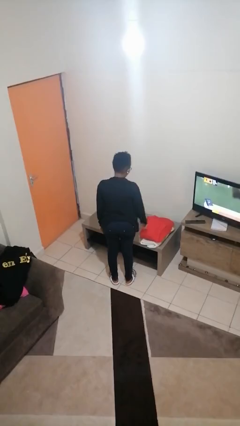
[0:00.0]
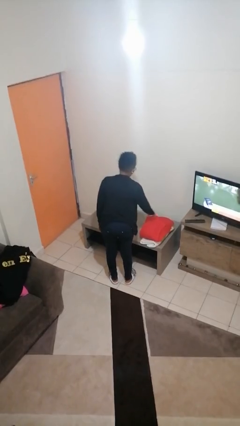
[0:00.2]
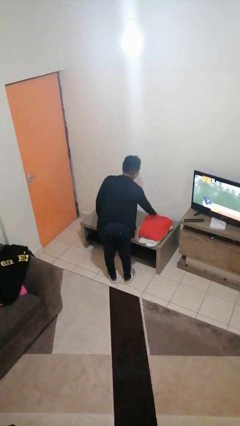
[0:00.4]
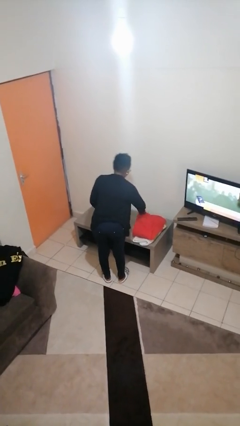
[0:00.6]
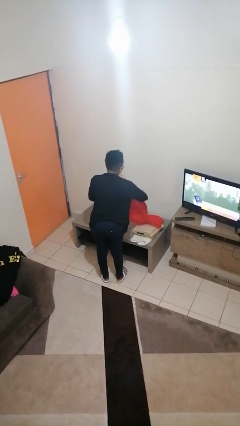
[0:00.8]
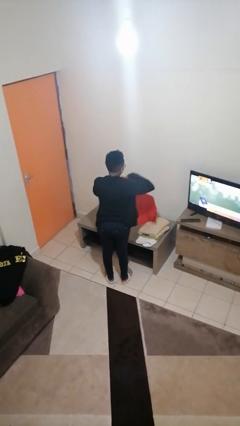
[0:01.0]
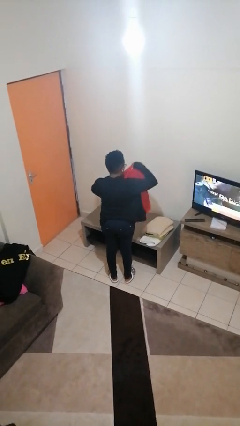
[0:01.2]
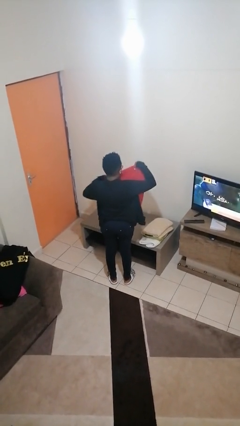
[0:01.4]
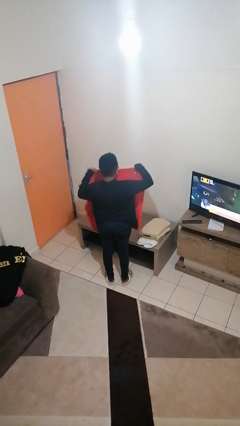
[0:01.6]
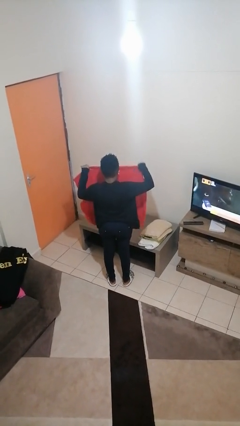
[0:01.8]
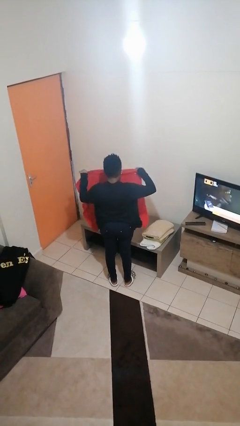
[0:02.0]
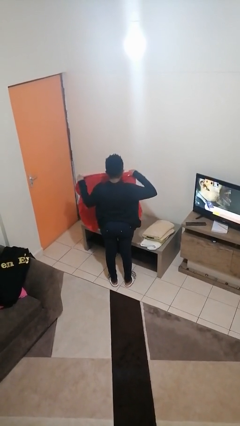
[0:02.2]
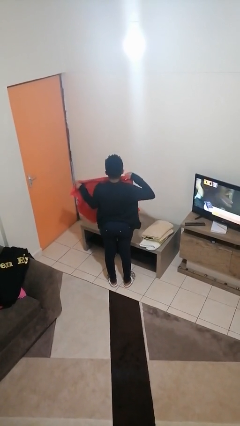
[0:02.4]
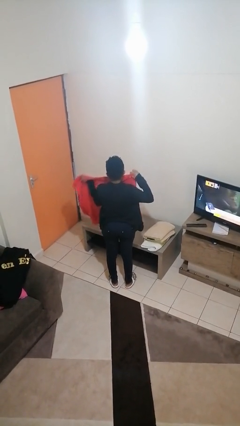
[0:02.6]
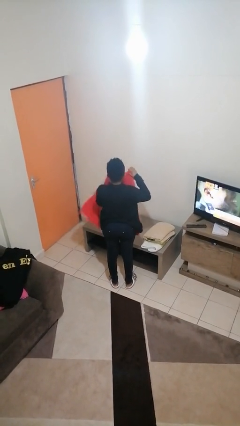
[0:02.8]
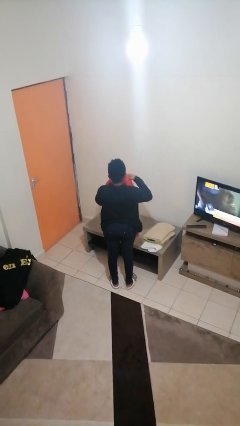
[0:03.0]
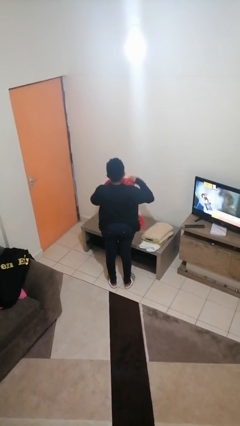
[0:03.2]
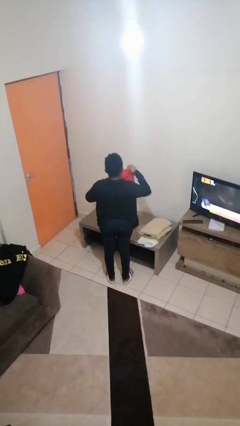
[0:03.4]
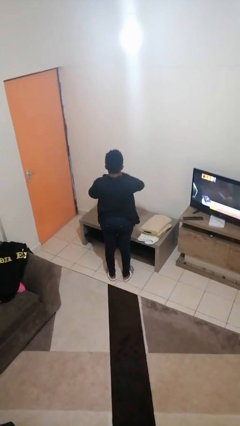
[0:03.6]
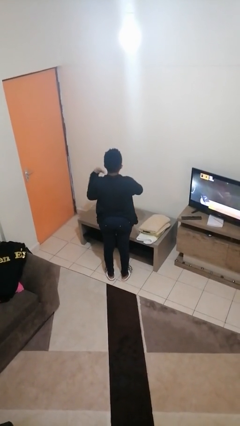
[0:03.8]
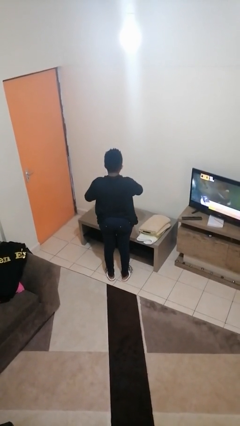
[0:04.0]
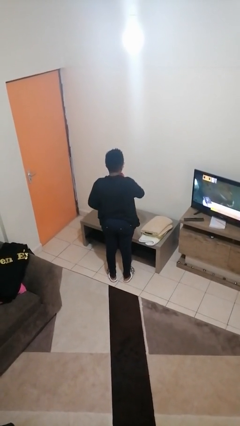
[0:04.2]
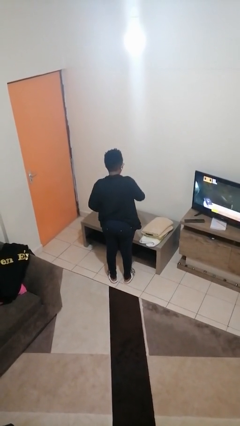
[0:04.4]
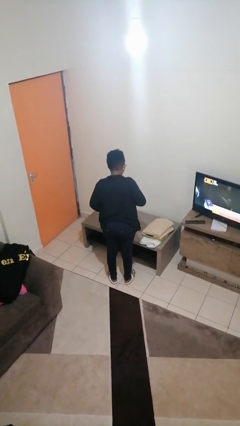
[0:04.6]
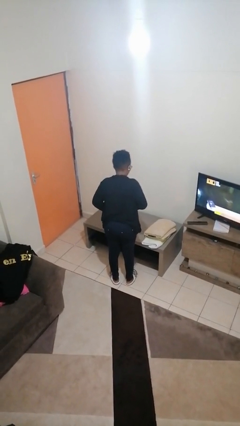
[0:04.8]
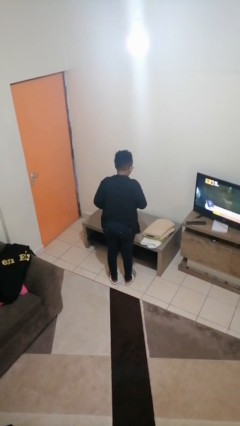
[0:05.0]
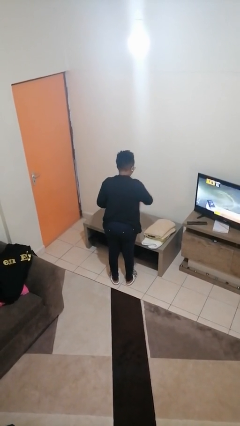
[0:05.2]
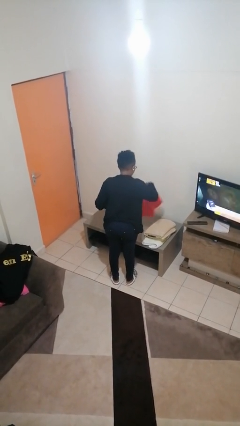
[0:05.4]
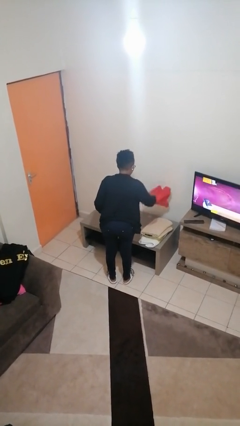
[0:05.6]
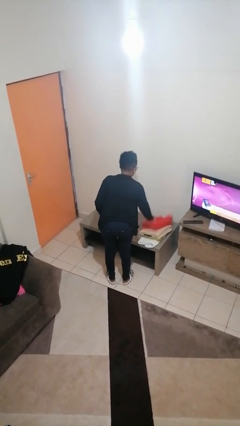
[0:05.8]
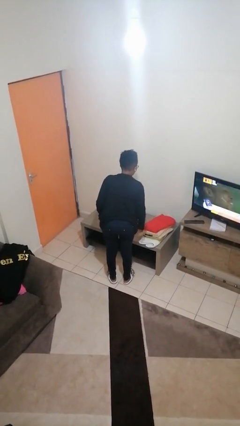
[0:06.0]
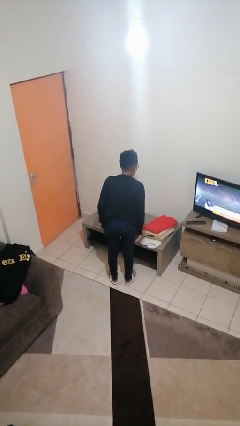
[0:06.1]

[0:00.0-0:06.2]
person folds towel

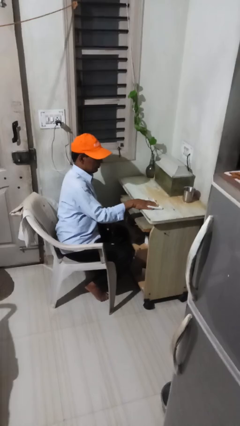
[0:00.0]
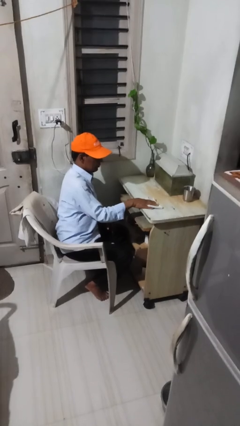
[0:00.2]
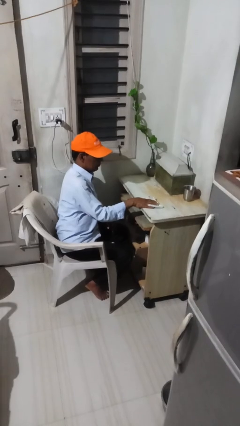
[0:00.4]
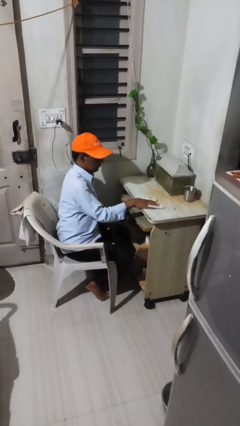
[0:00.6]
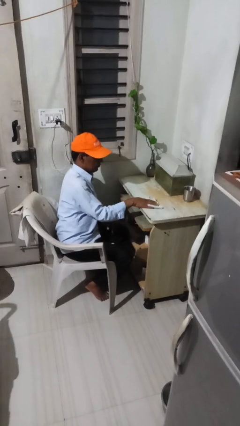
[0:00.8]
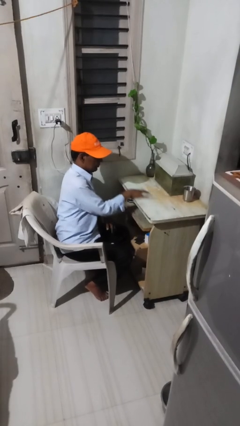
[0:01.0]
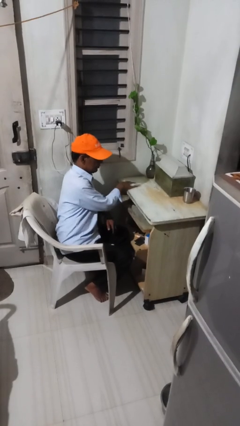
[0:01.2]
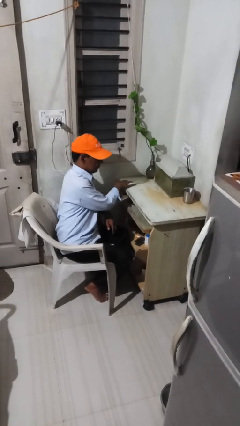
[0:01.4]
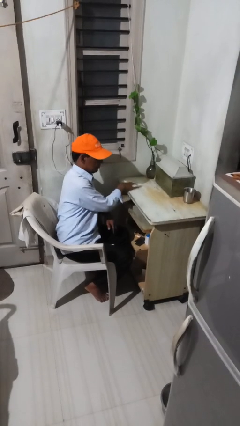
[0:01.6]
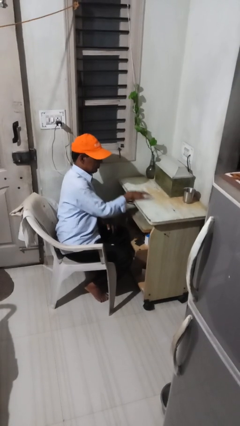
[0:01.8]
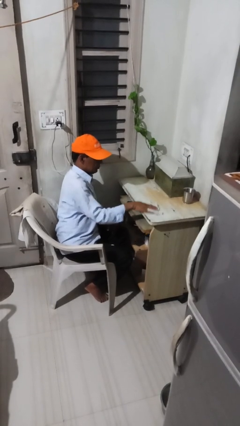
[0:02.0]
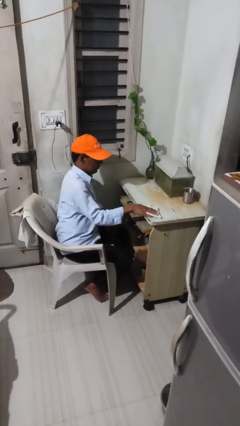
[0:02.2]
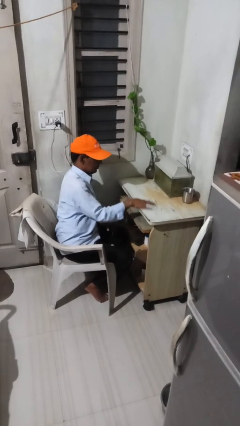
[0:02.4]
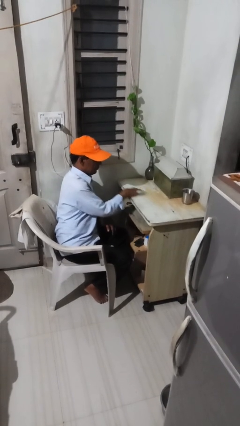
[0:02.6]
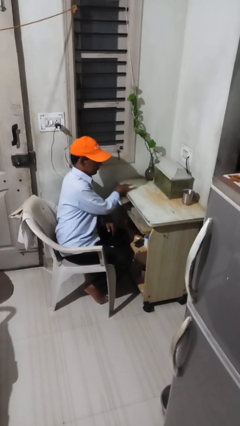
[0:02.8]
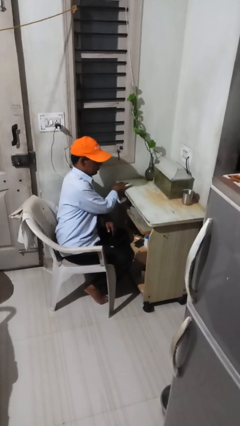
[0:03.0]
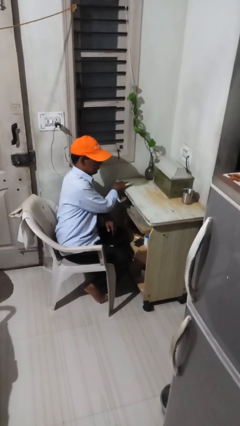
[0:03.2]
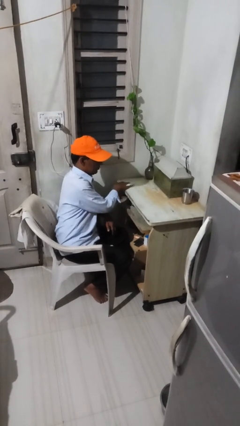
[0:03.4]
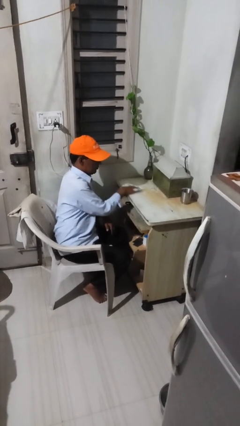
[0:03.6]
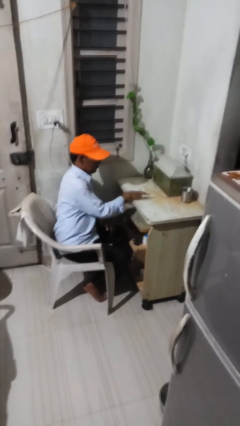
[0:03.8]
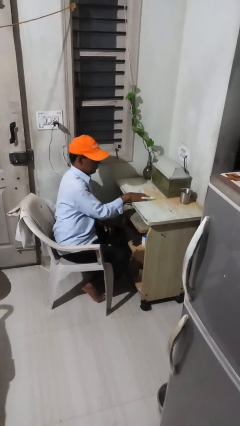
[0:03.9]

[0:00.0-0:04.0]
person cleans table with rag

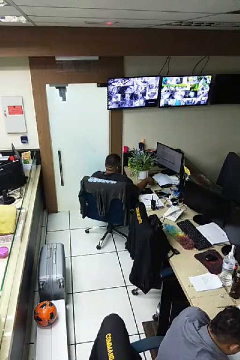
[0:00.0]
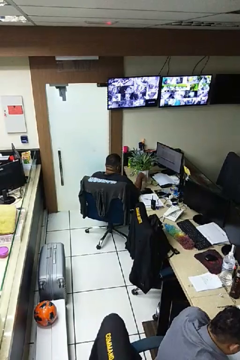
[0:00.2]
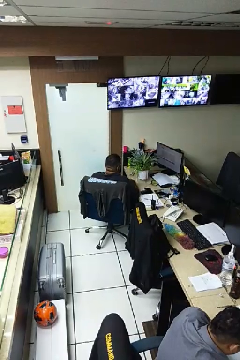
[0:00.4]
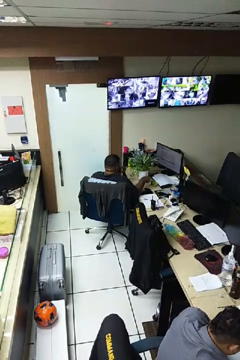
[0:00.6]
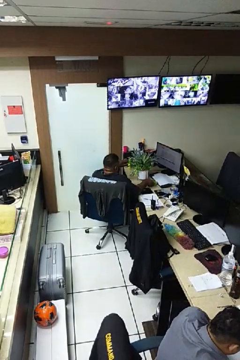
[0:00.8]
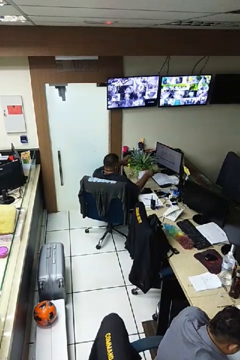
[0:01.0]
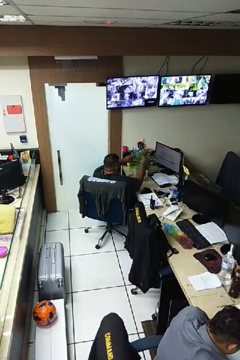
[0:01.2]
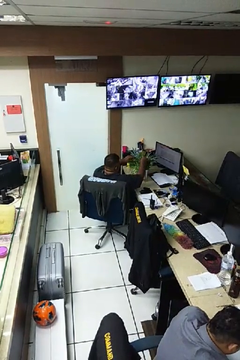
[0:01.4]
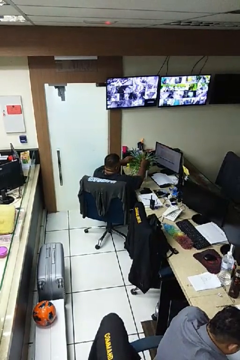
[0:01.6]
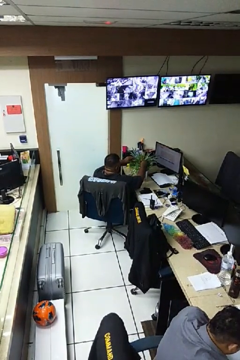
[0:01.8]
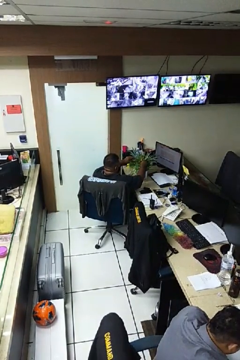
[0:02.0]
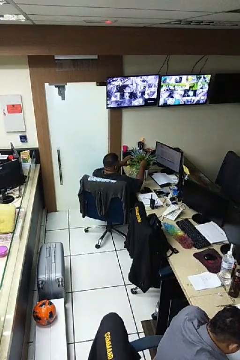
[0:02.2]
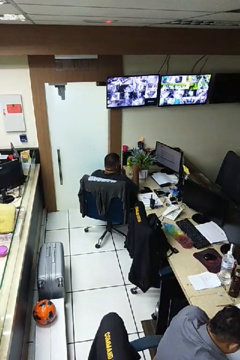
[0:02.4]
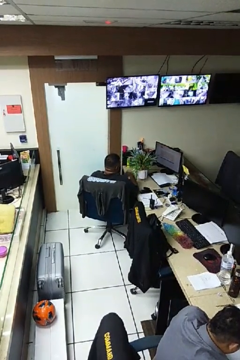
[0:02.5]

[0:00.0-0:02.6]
person arranges flowers in vase

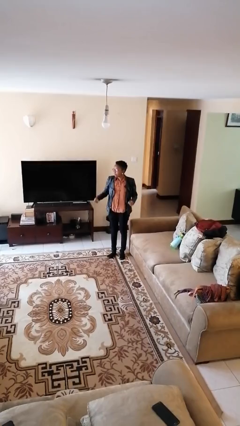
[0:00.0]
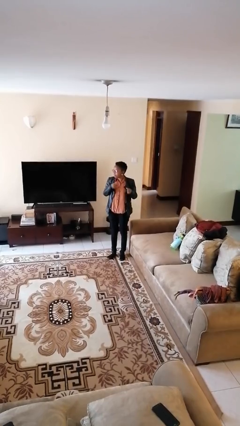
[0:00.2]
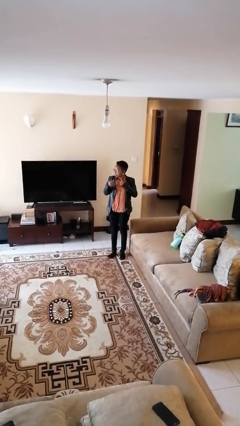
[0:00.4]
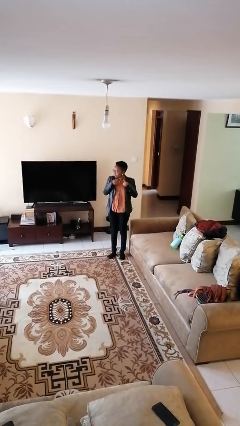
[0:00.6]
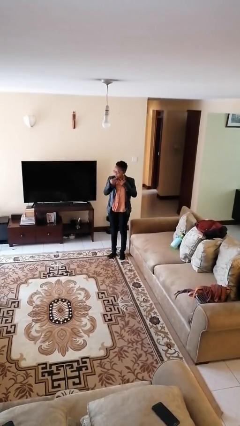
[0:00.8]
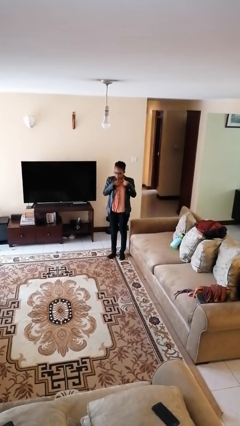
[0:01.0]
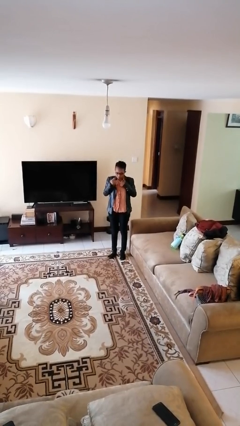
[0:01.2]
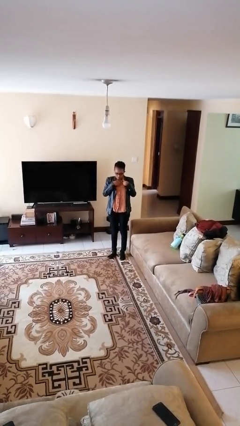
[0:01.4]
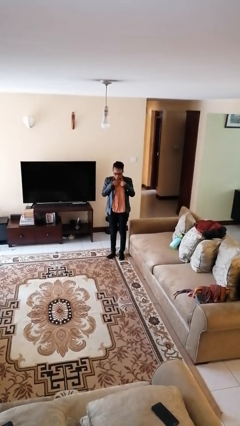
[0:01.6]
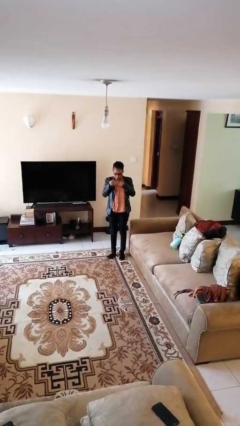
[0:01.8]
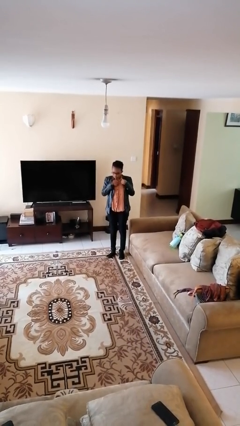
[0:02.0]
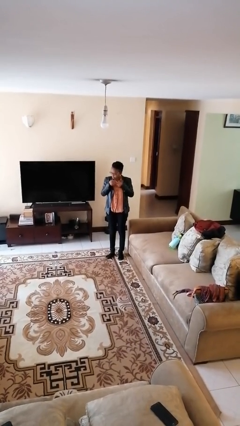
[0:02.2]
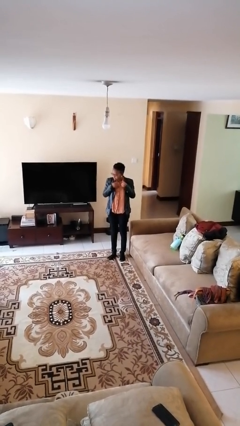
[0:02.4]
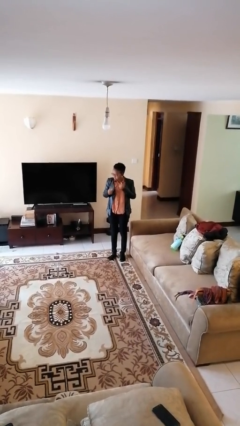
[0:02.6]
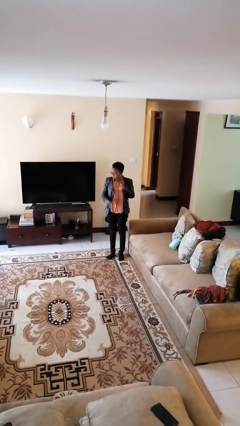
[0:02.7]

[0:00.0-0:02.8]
person drums on chest

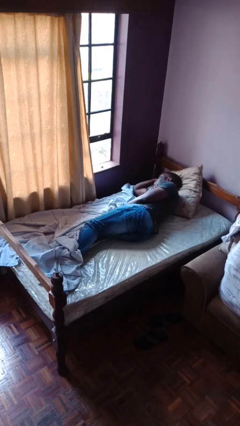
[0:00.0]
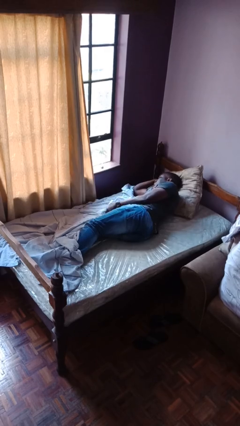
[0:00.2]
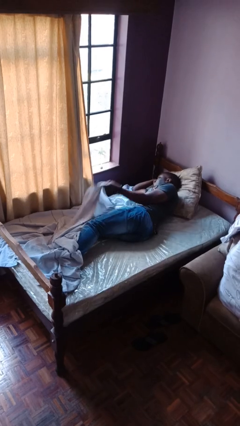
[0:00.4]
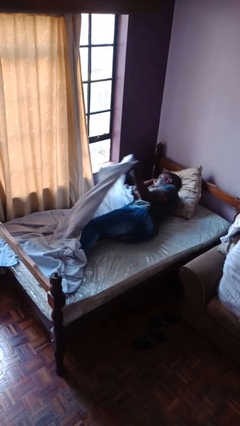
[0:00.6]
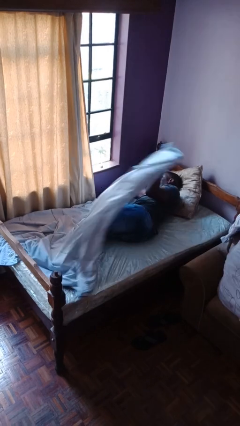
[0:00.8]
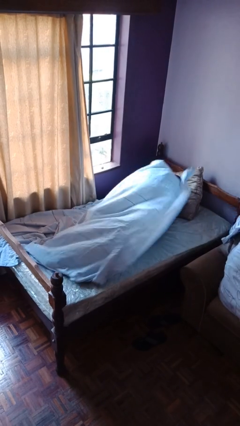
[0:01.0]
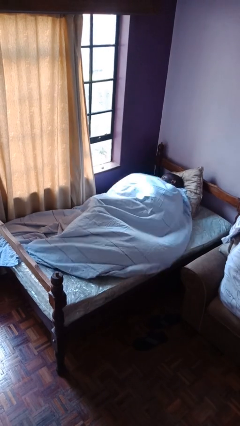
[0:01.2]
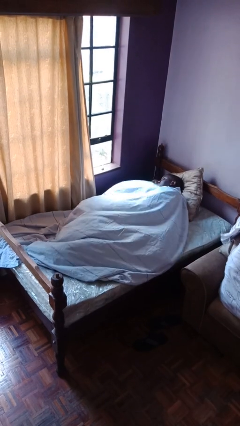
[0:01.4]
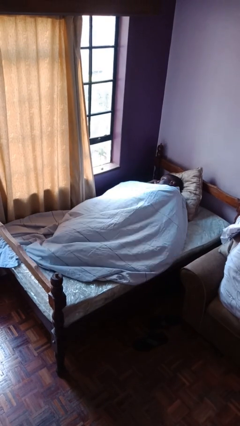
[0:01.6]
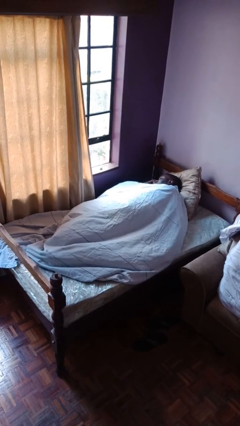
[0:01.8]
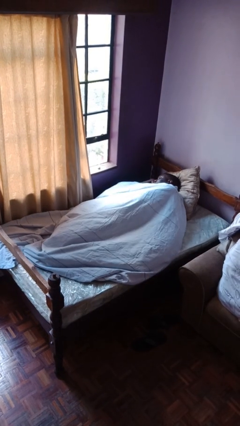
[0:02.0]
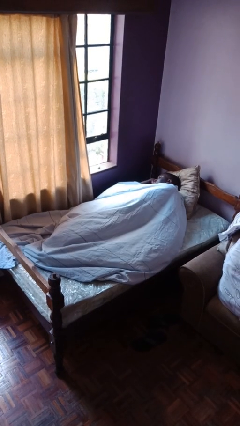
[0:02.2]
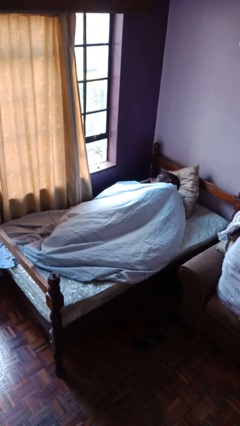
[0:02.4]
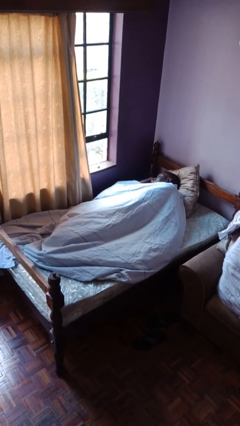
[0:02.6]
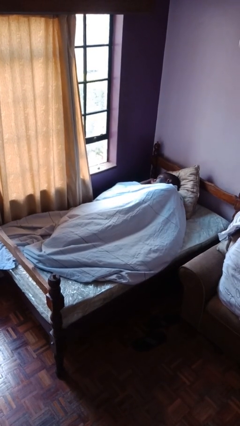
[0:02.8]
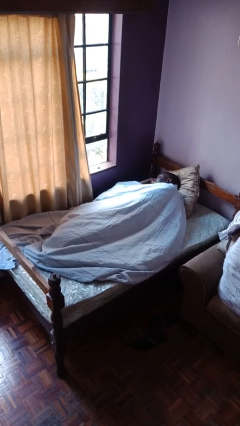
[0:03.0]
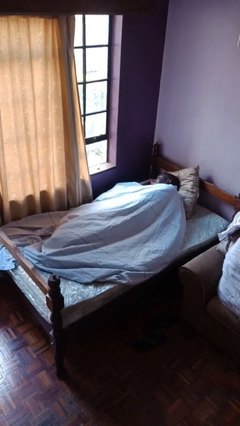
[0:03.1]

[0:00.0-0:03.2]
person covers with bedsheets
